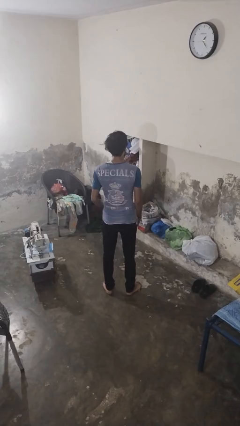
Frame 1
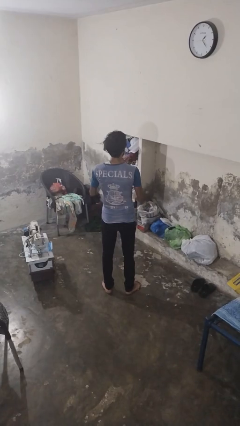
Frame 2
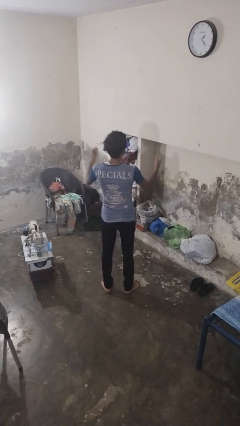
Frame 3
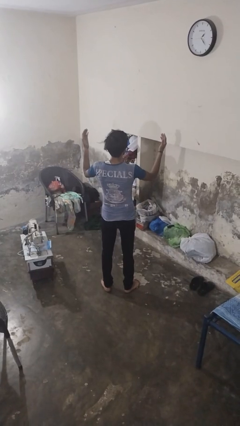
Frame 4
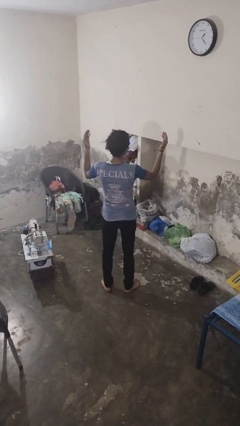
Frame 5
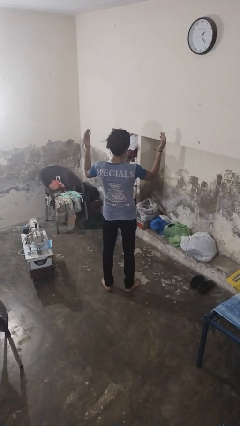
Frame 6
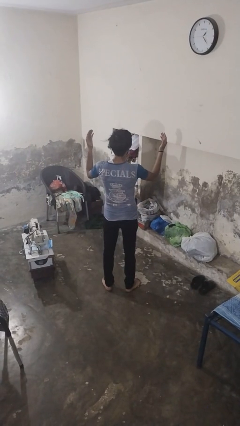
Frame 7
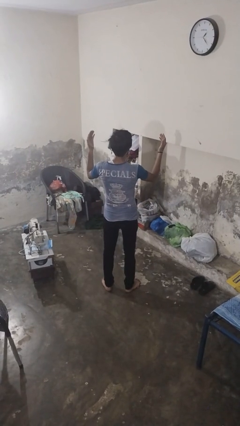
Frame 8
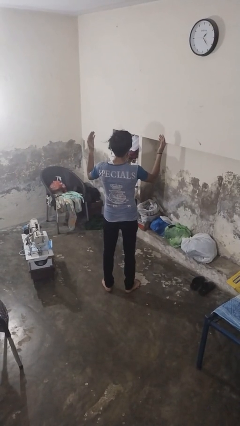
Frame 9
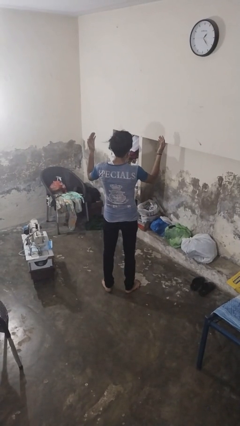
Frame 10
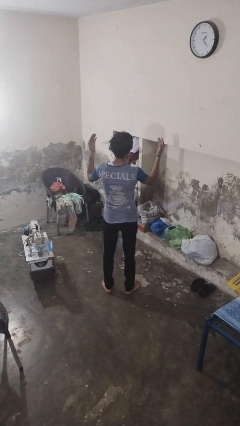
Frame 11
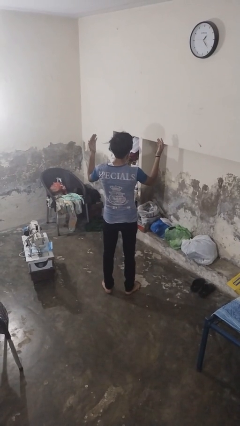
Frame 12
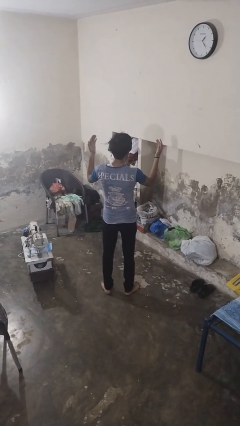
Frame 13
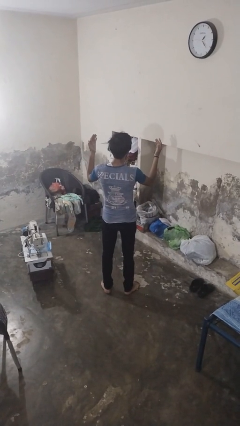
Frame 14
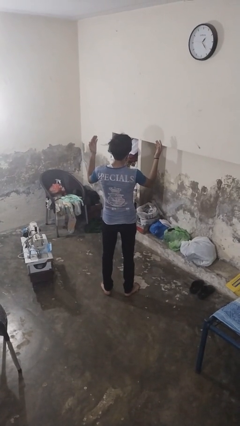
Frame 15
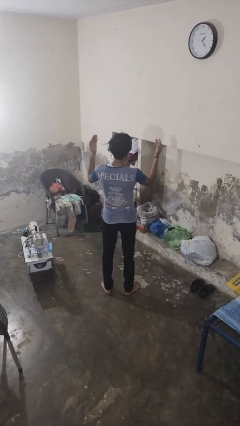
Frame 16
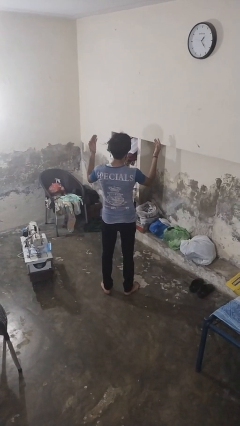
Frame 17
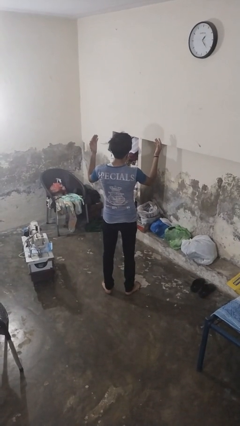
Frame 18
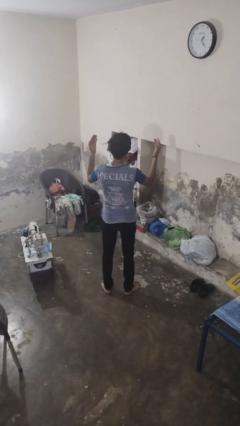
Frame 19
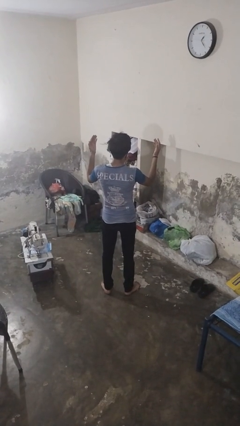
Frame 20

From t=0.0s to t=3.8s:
person prays

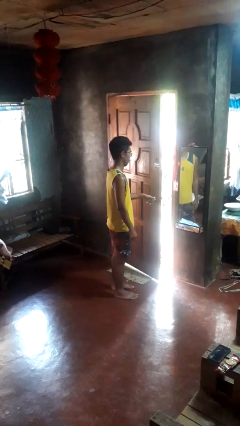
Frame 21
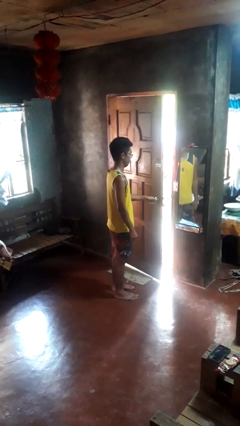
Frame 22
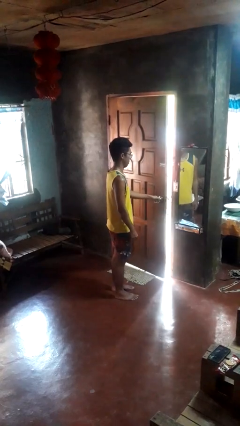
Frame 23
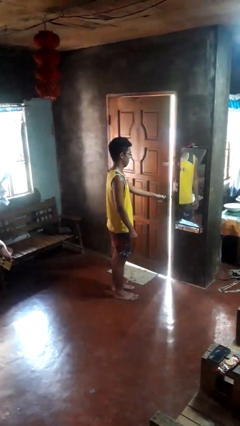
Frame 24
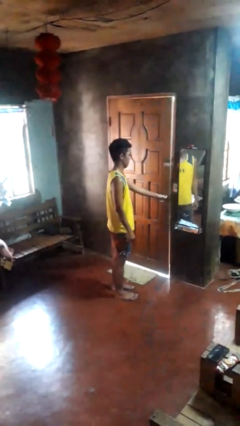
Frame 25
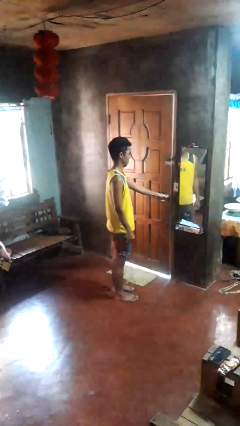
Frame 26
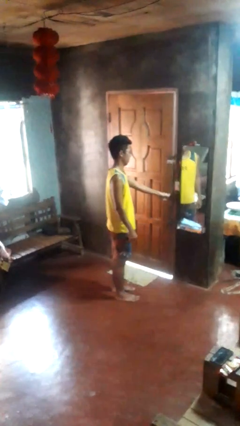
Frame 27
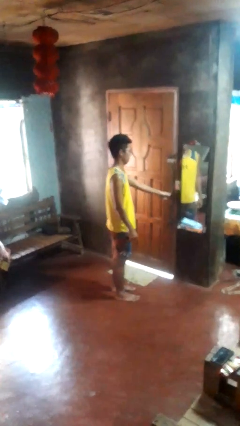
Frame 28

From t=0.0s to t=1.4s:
person closes facility door

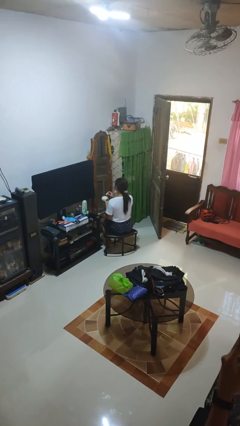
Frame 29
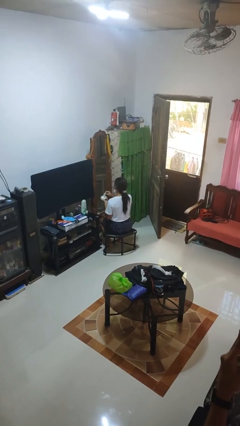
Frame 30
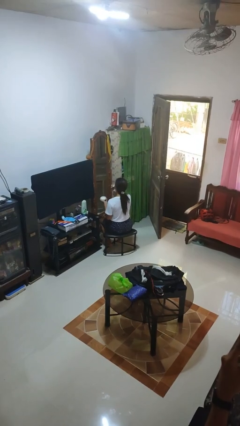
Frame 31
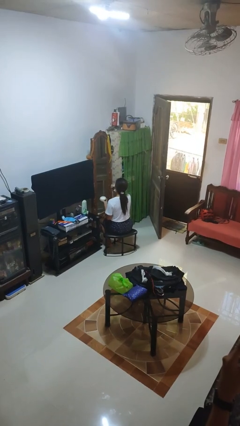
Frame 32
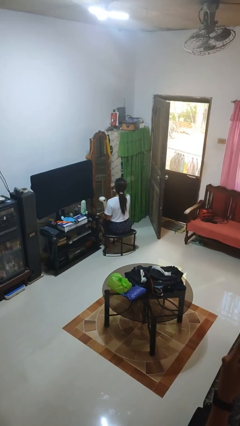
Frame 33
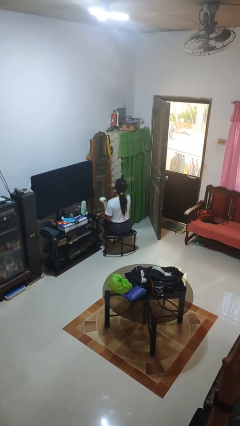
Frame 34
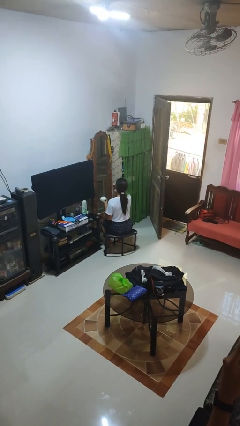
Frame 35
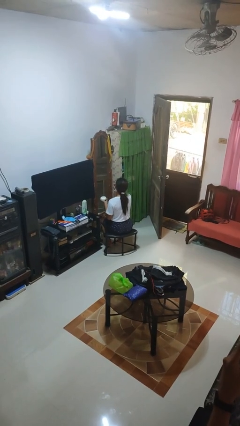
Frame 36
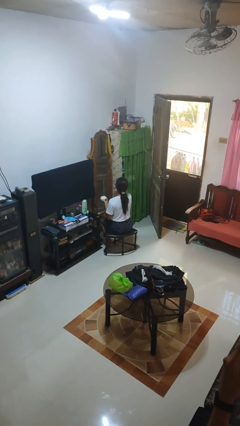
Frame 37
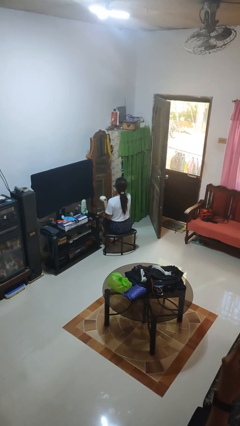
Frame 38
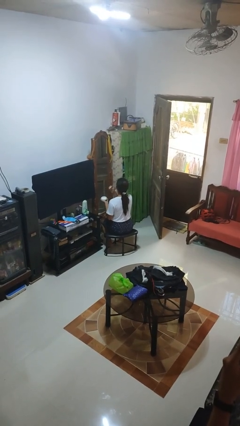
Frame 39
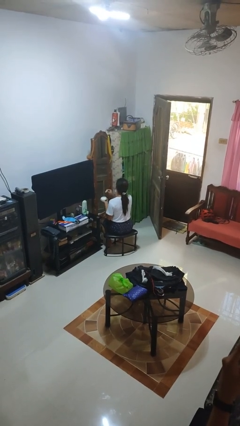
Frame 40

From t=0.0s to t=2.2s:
person applies foundation makeup

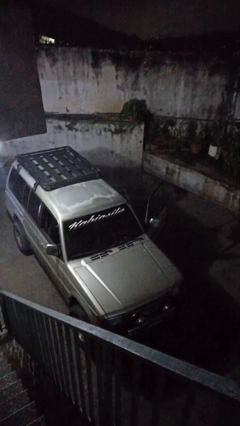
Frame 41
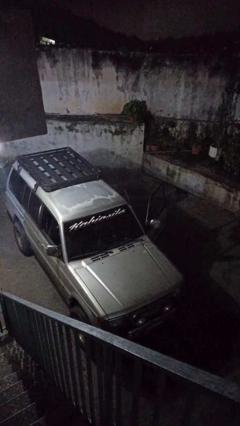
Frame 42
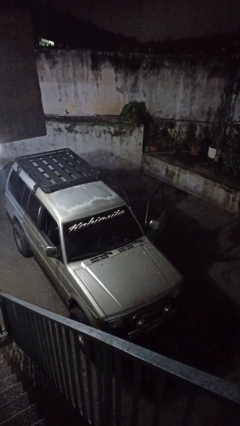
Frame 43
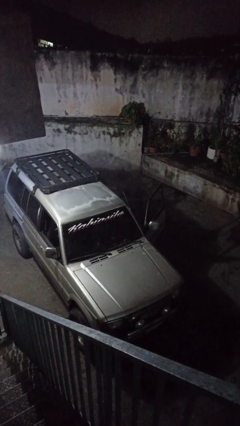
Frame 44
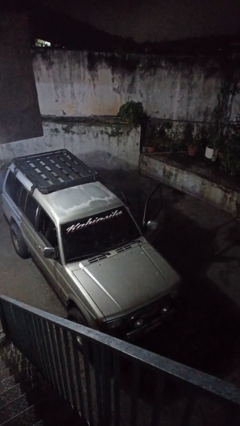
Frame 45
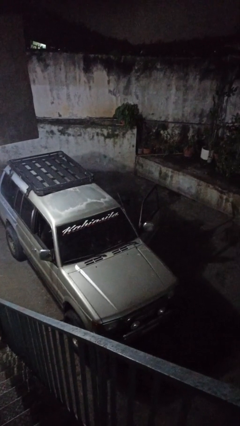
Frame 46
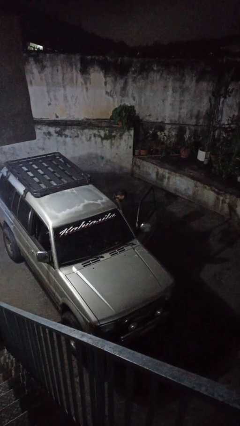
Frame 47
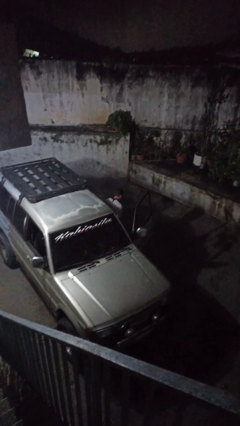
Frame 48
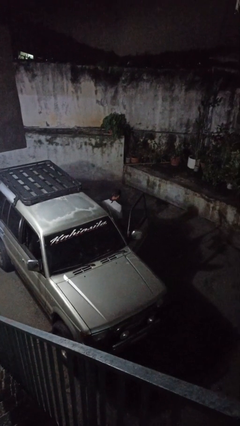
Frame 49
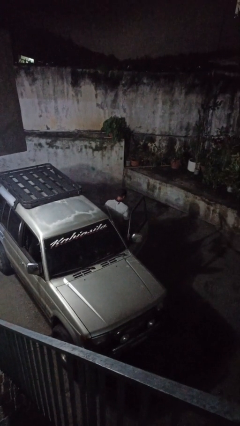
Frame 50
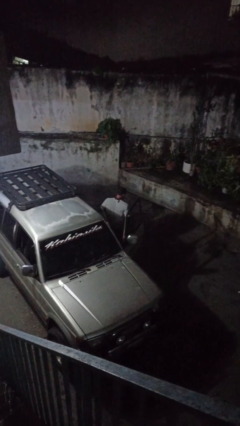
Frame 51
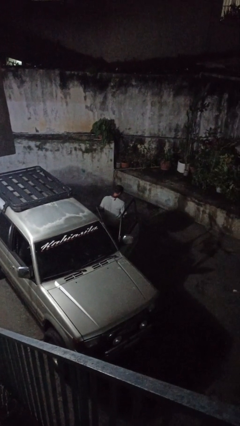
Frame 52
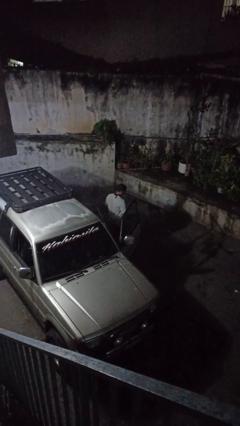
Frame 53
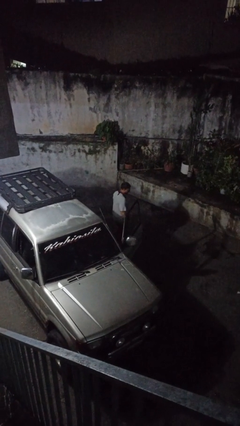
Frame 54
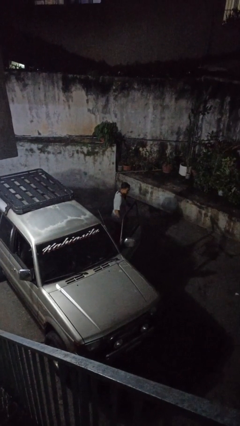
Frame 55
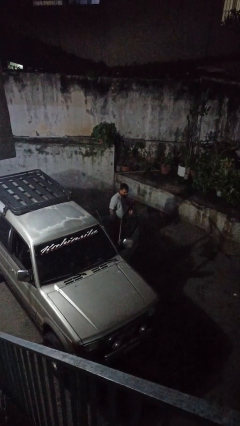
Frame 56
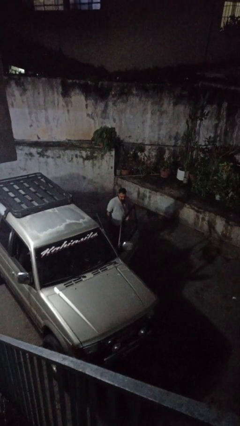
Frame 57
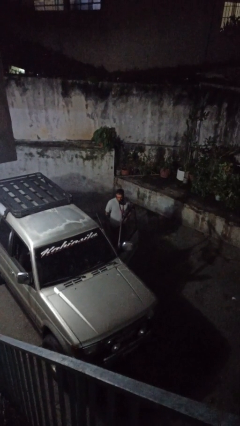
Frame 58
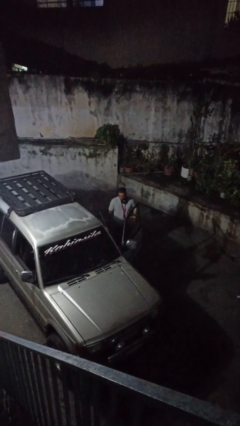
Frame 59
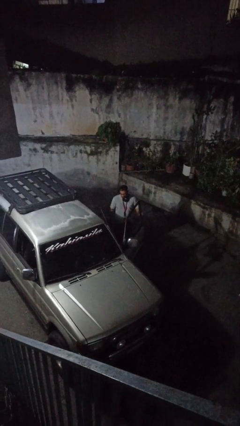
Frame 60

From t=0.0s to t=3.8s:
person exits car

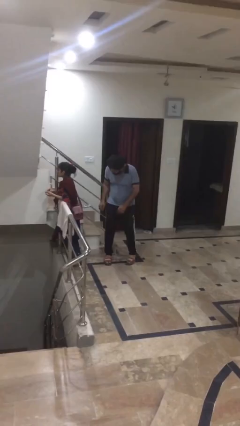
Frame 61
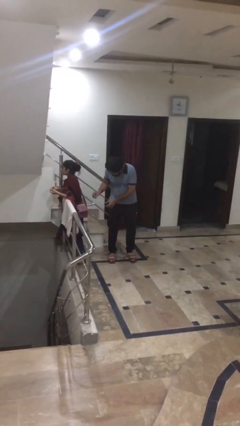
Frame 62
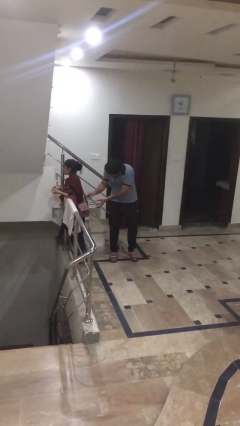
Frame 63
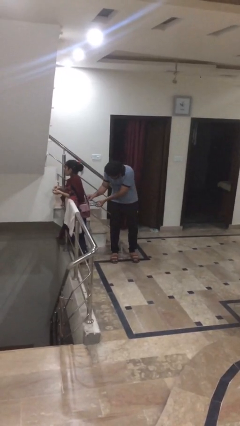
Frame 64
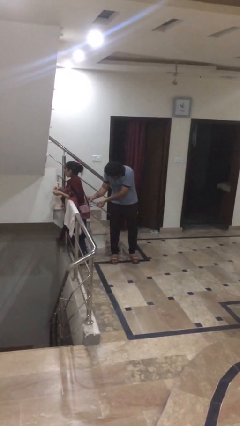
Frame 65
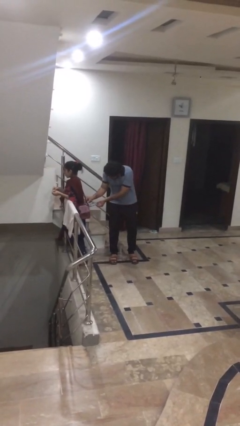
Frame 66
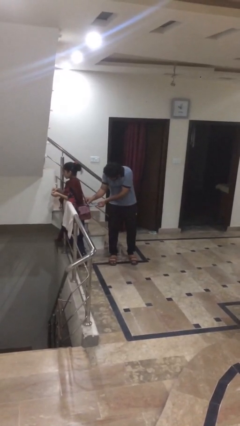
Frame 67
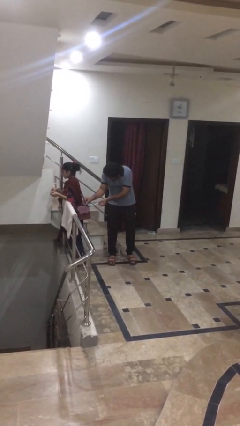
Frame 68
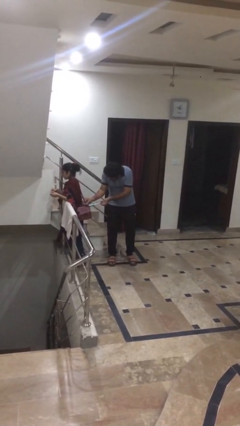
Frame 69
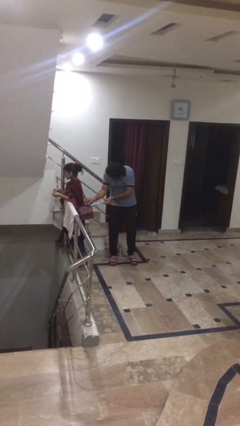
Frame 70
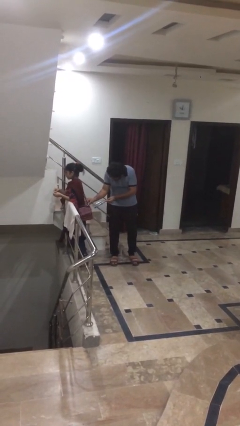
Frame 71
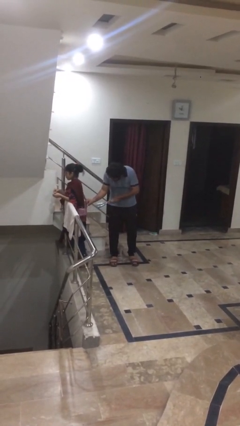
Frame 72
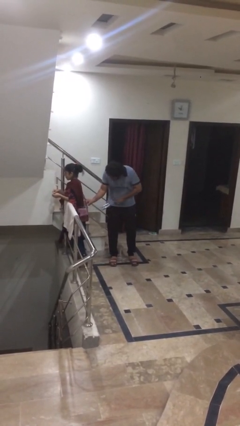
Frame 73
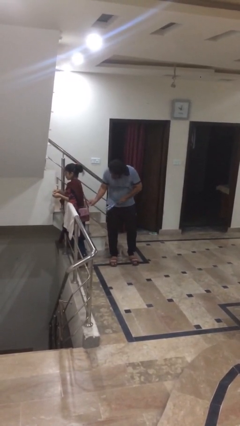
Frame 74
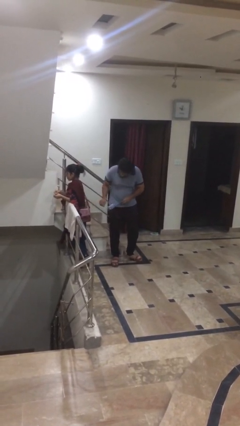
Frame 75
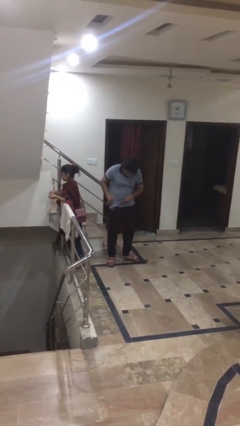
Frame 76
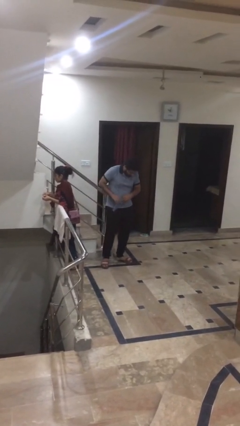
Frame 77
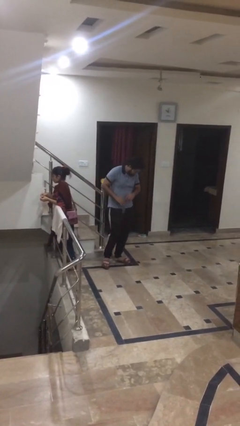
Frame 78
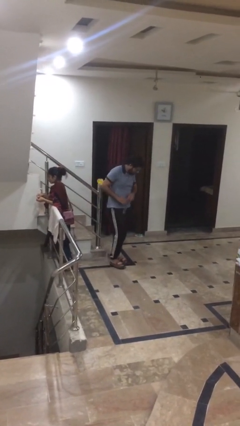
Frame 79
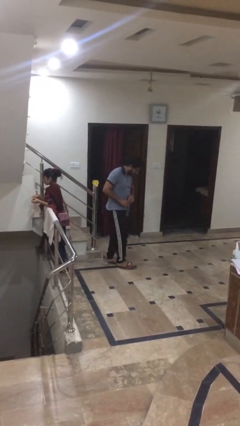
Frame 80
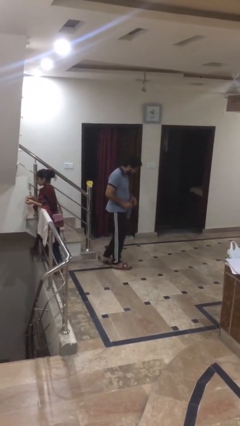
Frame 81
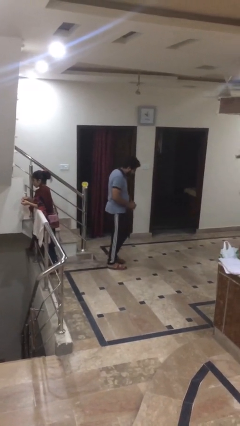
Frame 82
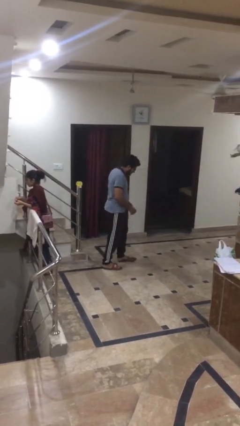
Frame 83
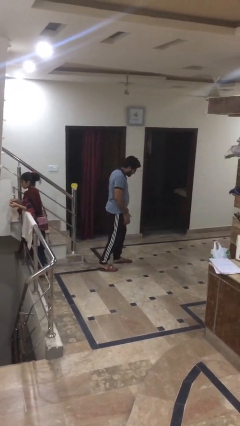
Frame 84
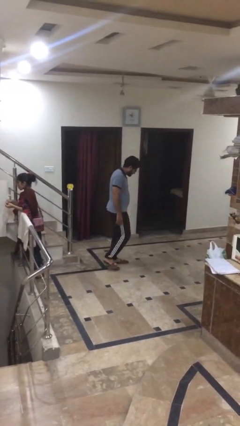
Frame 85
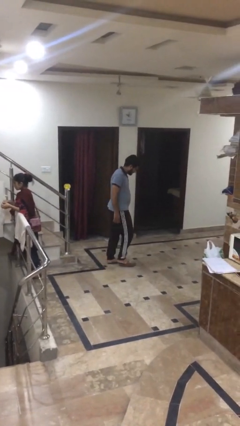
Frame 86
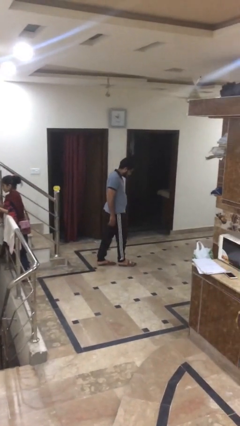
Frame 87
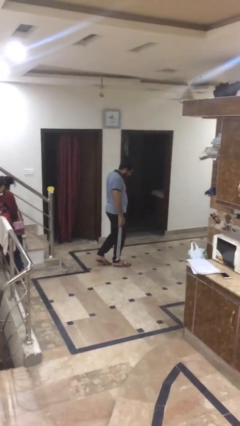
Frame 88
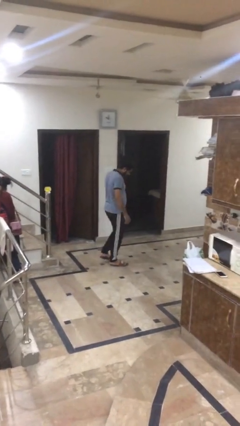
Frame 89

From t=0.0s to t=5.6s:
person steals object from person

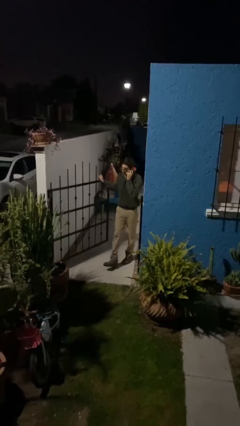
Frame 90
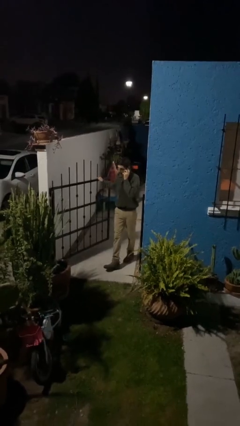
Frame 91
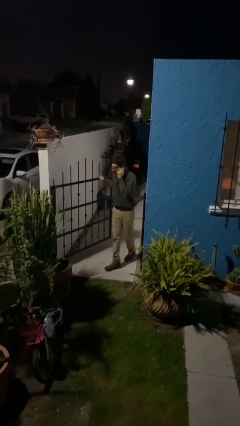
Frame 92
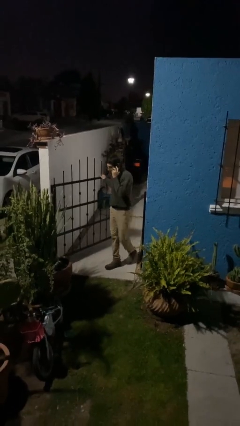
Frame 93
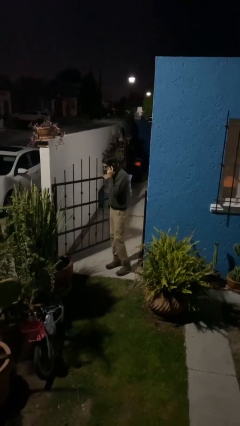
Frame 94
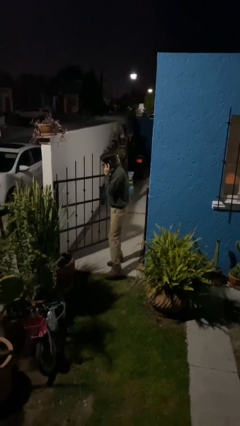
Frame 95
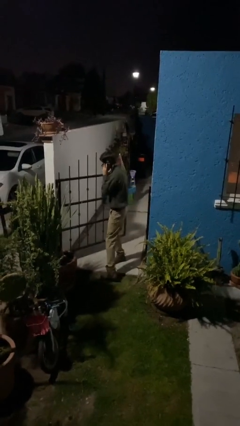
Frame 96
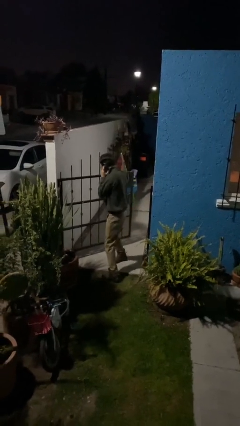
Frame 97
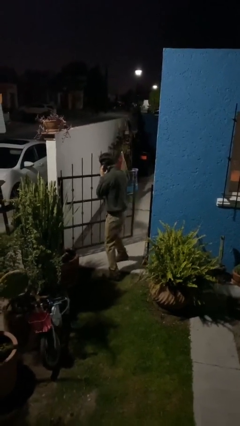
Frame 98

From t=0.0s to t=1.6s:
person enters scene through structure
